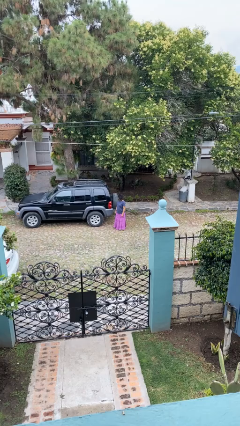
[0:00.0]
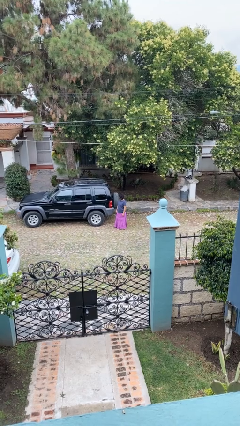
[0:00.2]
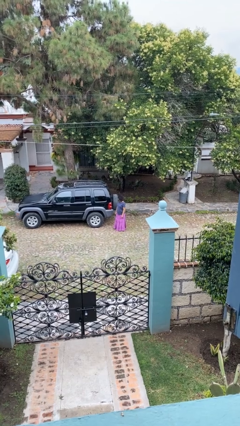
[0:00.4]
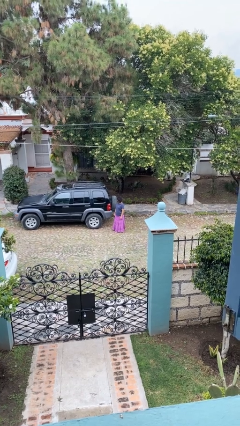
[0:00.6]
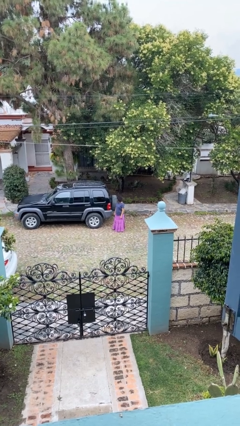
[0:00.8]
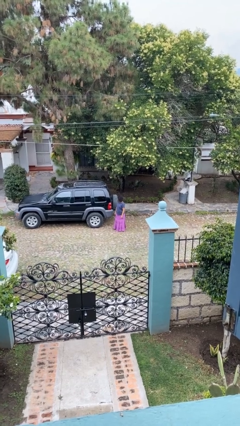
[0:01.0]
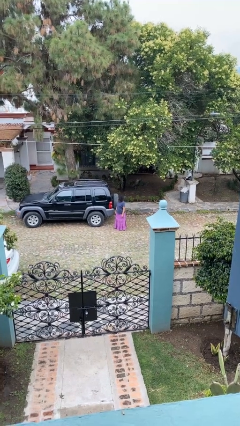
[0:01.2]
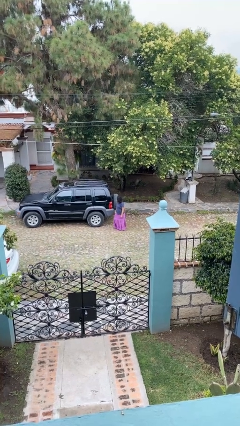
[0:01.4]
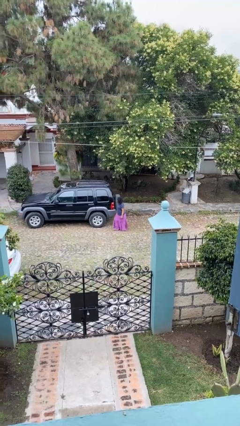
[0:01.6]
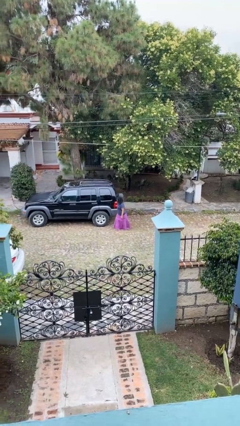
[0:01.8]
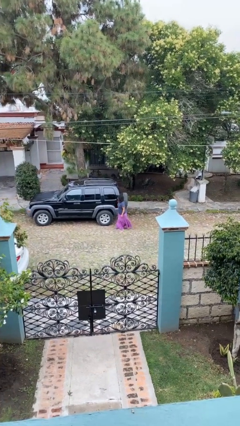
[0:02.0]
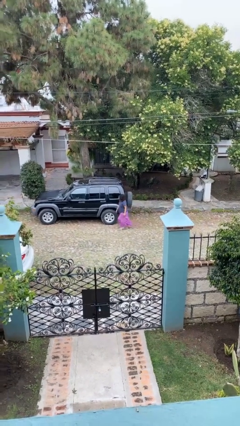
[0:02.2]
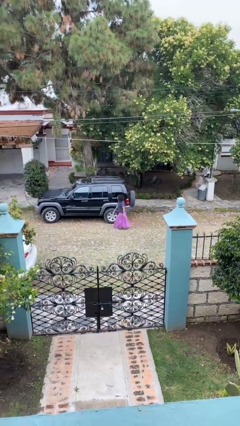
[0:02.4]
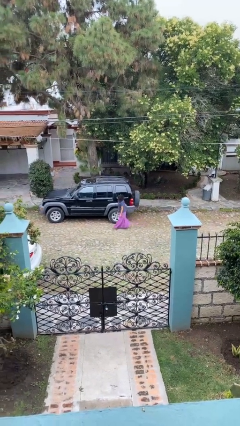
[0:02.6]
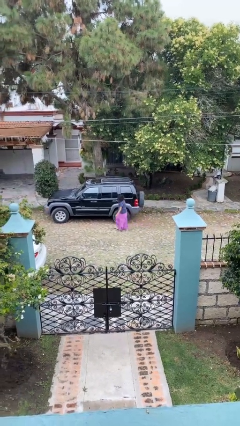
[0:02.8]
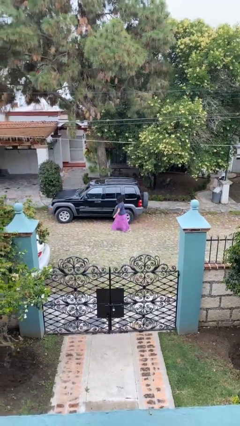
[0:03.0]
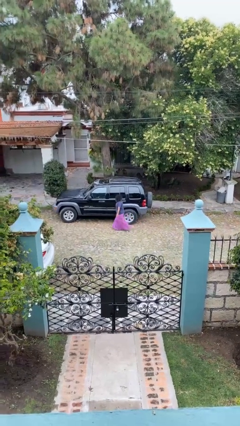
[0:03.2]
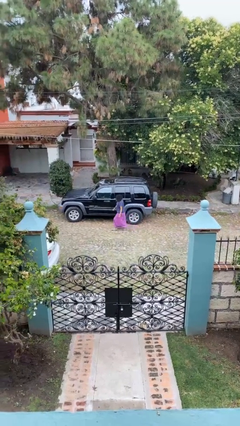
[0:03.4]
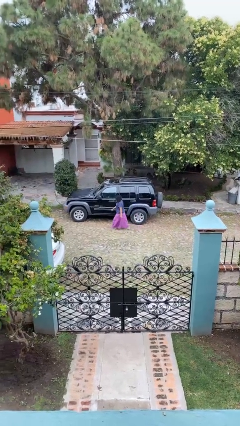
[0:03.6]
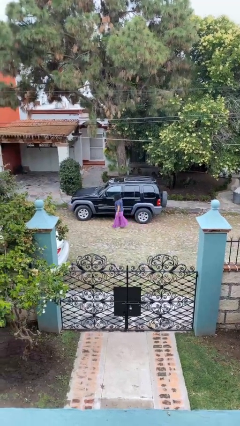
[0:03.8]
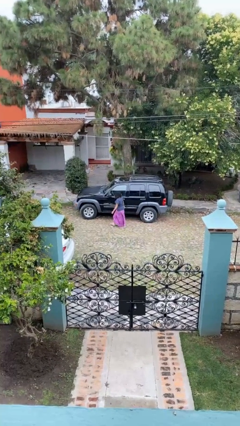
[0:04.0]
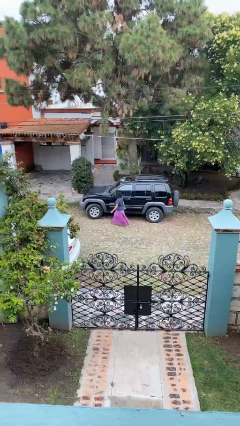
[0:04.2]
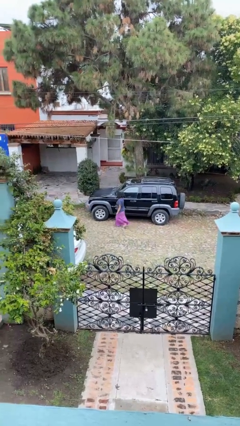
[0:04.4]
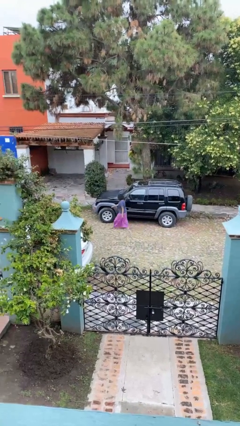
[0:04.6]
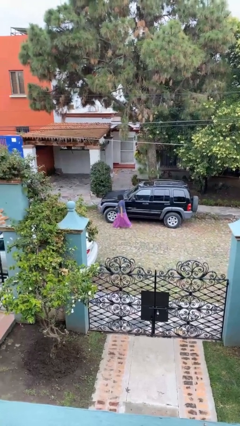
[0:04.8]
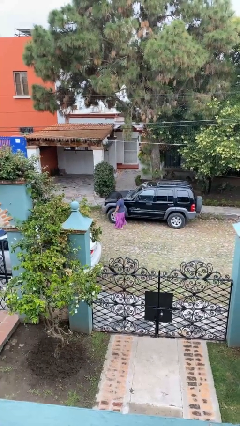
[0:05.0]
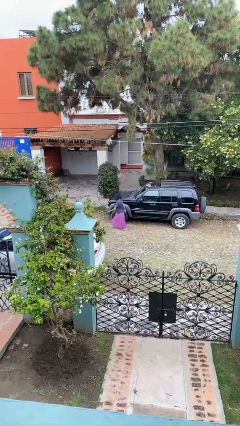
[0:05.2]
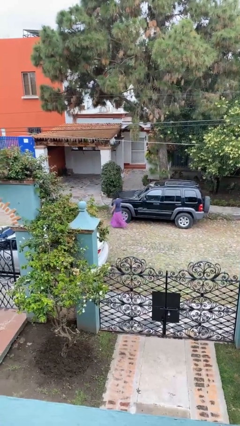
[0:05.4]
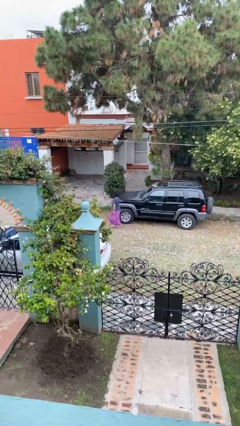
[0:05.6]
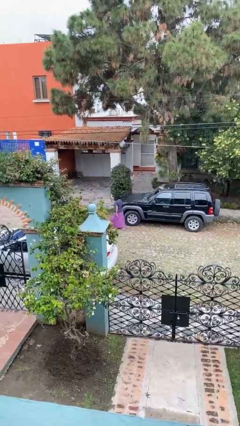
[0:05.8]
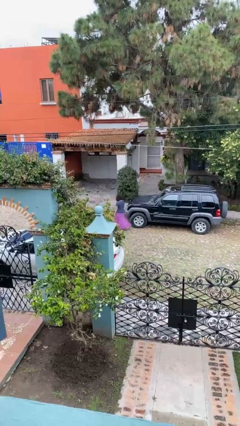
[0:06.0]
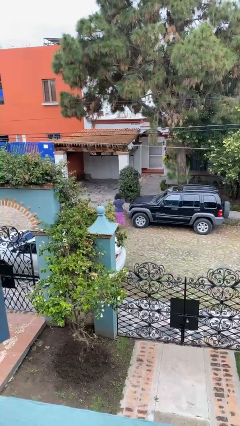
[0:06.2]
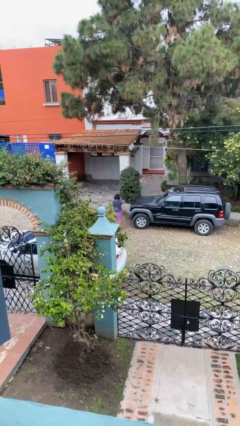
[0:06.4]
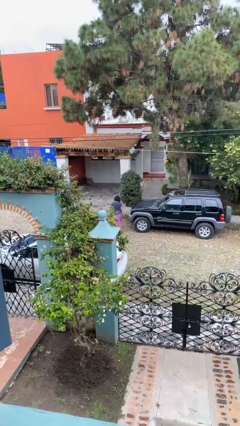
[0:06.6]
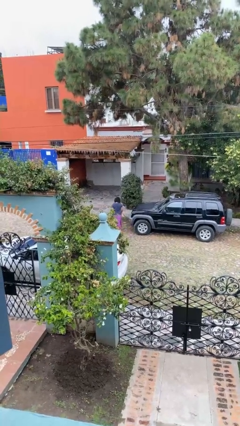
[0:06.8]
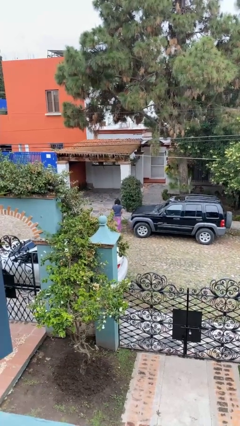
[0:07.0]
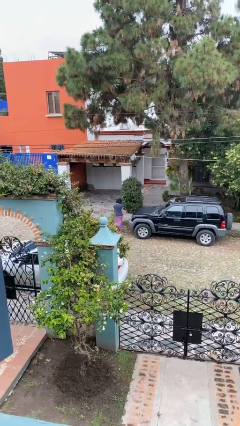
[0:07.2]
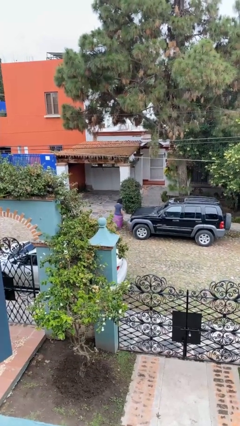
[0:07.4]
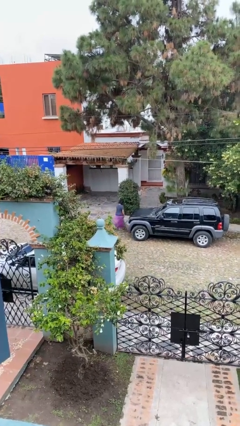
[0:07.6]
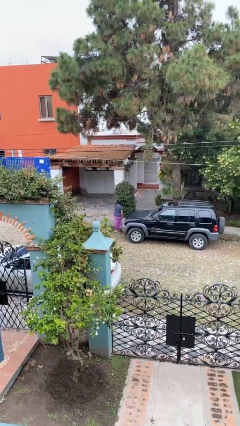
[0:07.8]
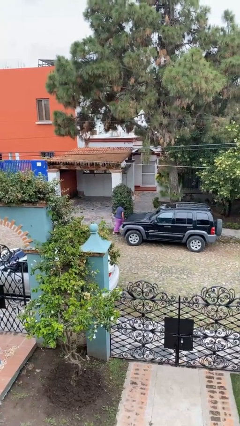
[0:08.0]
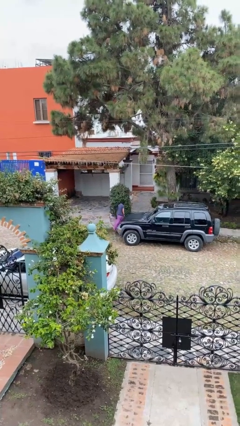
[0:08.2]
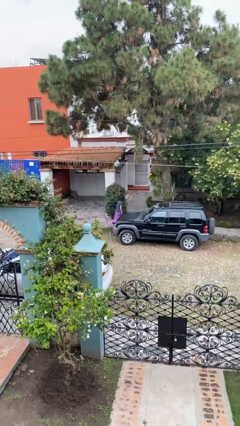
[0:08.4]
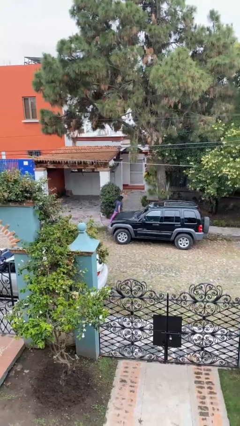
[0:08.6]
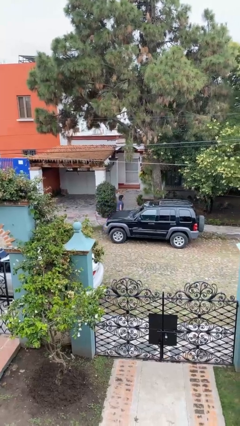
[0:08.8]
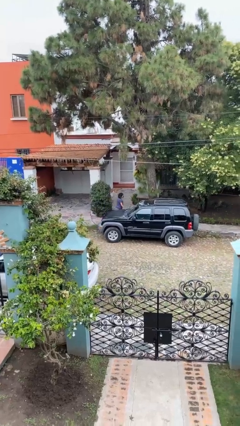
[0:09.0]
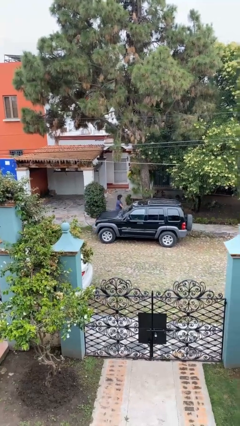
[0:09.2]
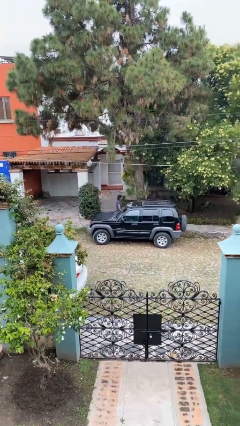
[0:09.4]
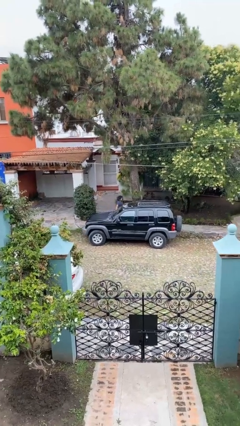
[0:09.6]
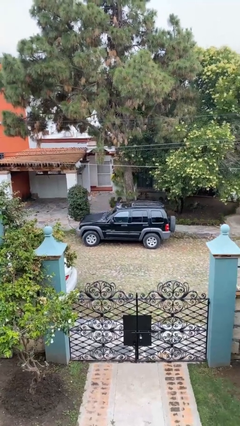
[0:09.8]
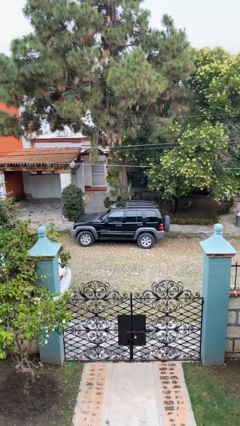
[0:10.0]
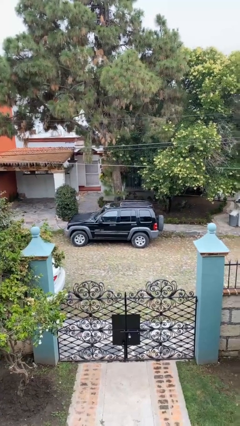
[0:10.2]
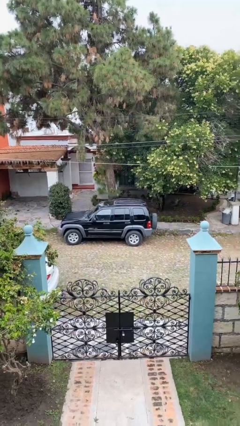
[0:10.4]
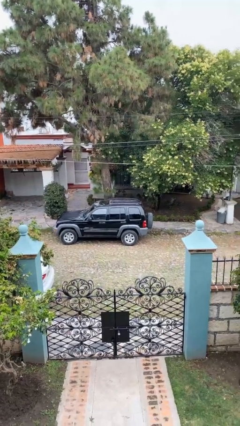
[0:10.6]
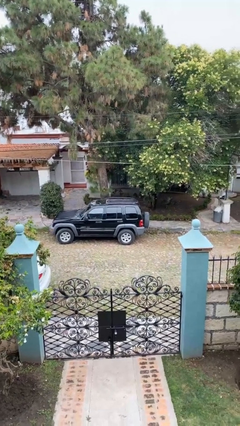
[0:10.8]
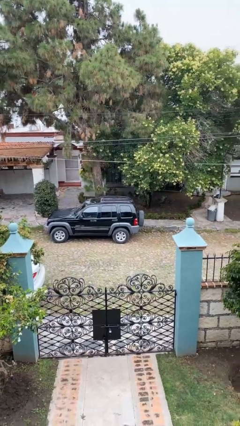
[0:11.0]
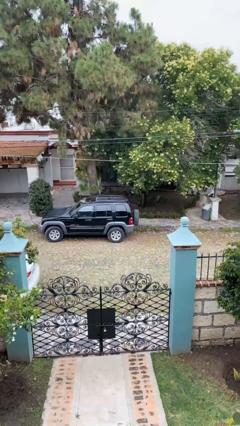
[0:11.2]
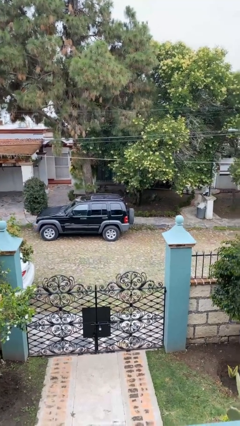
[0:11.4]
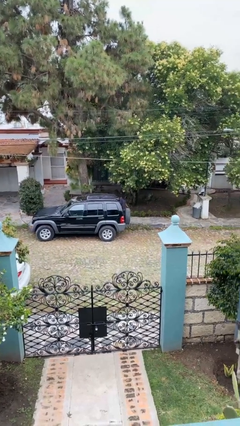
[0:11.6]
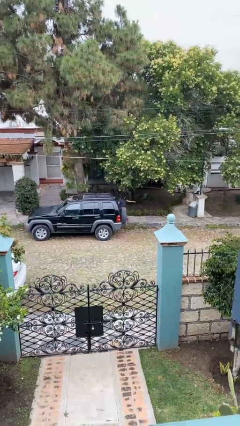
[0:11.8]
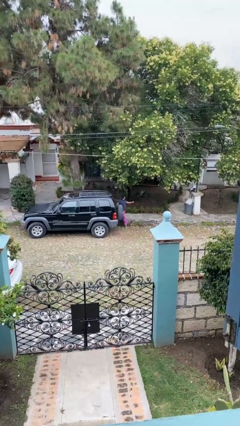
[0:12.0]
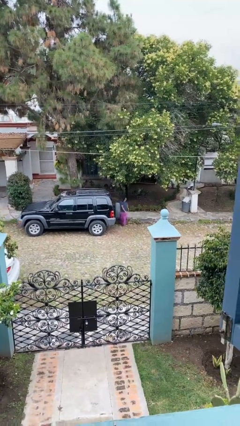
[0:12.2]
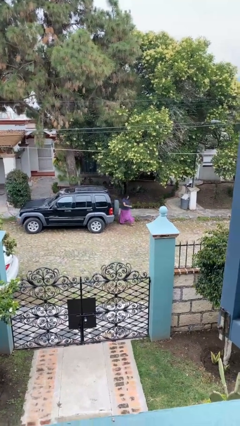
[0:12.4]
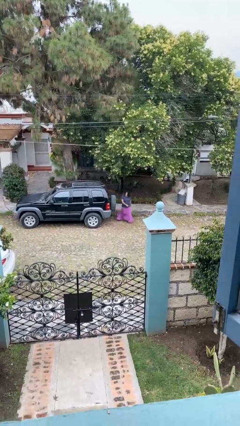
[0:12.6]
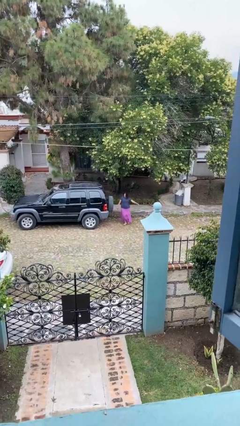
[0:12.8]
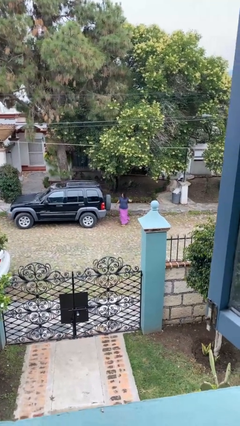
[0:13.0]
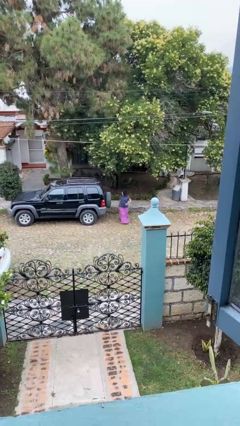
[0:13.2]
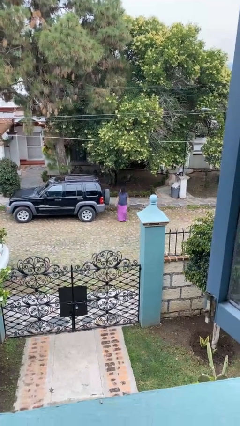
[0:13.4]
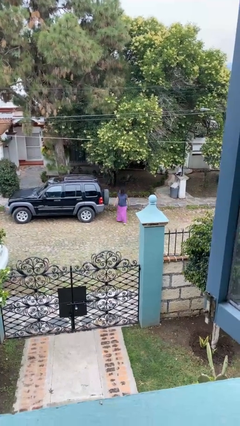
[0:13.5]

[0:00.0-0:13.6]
person walks around car

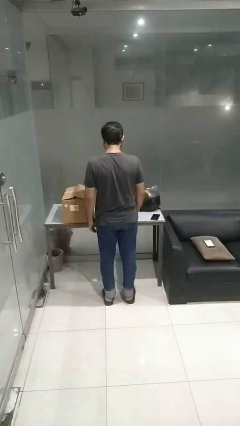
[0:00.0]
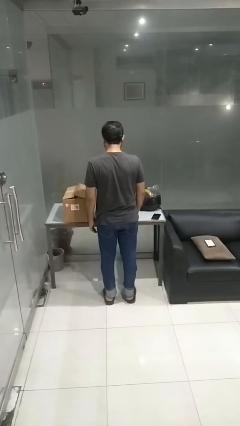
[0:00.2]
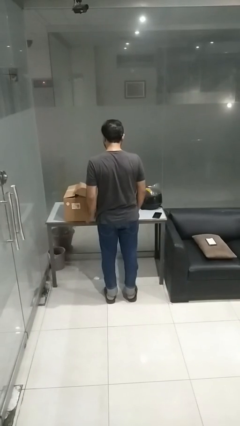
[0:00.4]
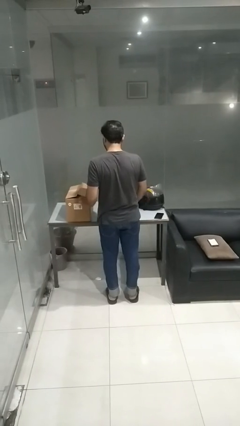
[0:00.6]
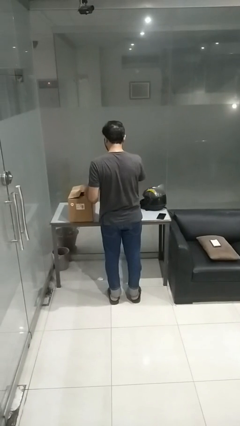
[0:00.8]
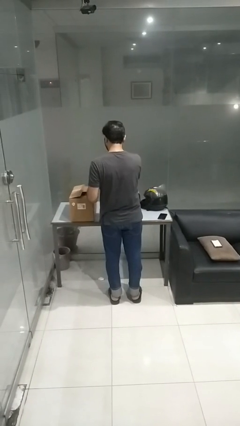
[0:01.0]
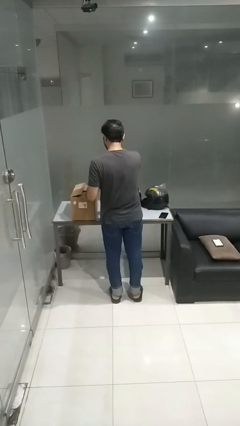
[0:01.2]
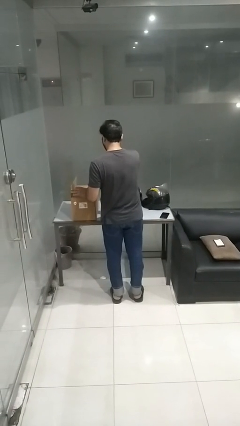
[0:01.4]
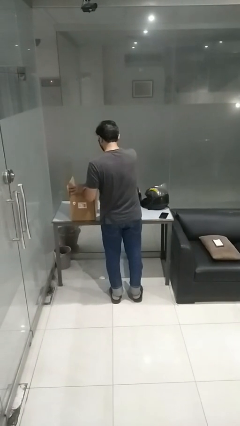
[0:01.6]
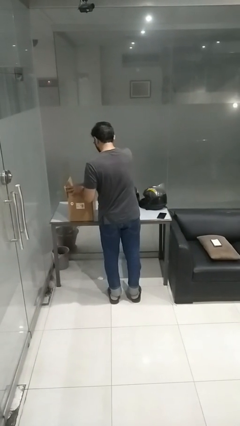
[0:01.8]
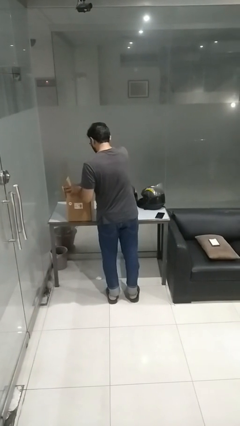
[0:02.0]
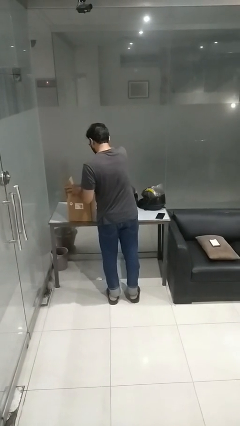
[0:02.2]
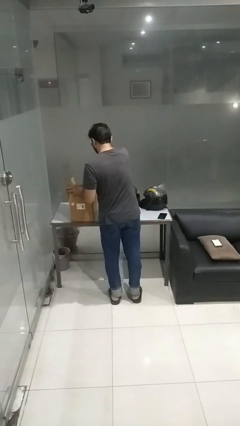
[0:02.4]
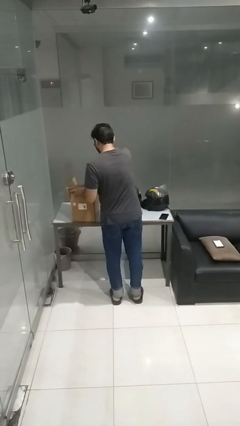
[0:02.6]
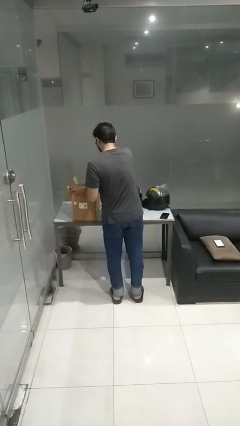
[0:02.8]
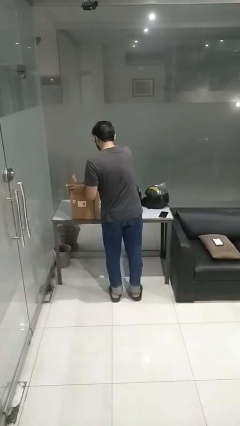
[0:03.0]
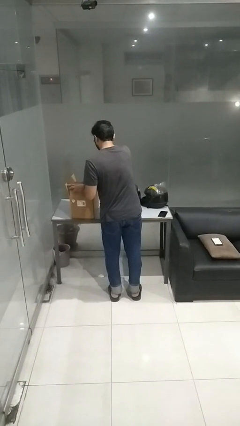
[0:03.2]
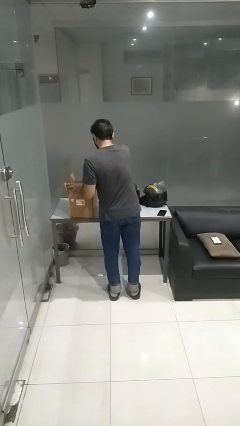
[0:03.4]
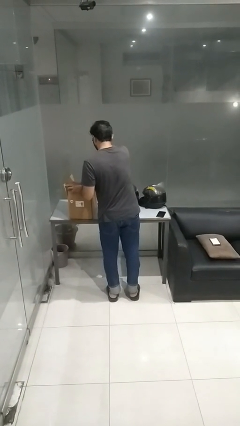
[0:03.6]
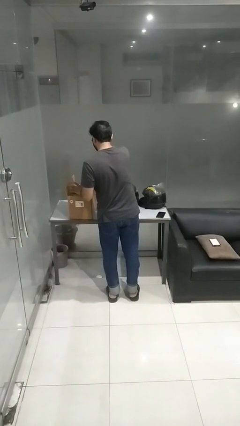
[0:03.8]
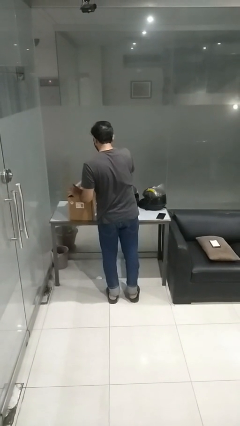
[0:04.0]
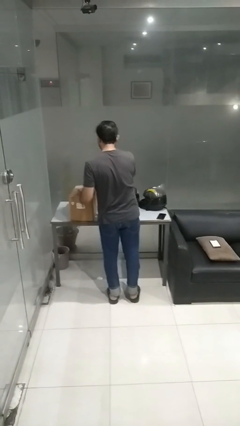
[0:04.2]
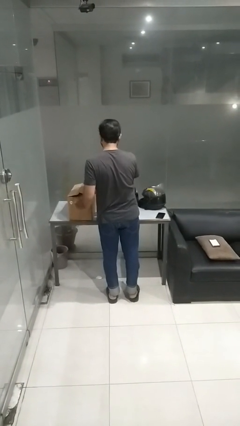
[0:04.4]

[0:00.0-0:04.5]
person searches in box

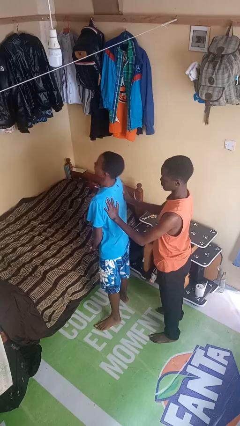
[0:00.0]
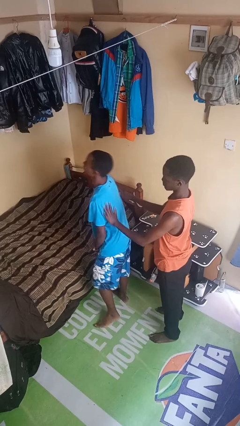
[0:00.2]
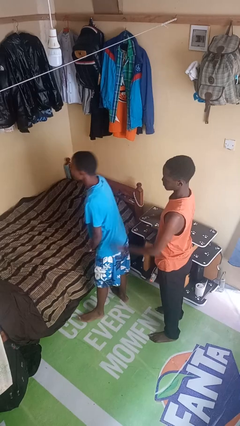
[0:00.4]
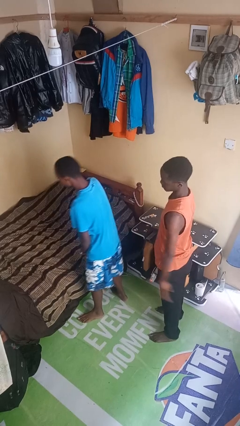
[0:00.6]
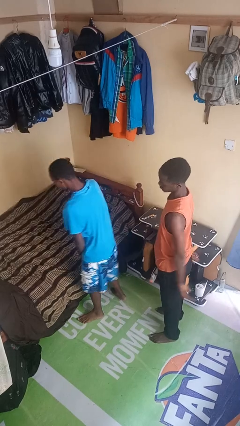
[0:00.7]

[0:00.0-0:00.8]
person shoves person
